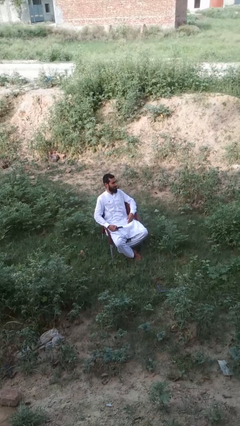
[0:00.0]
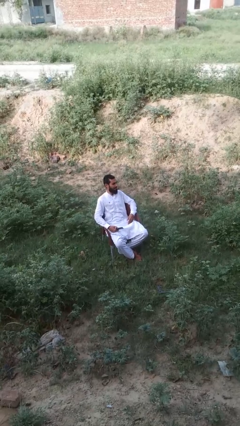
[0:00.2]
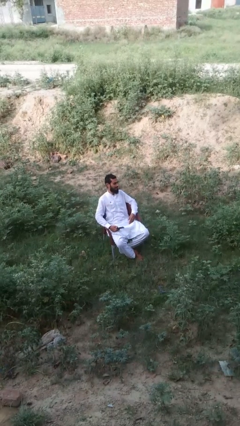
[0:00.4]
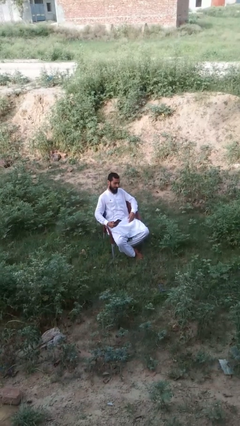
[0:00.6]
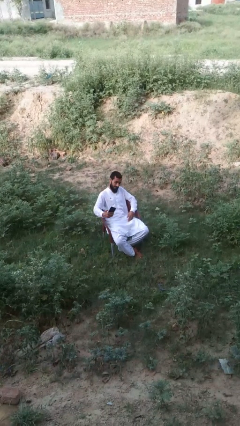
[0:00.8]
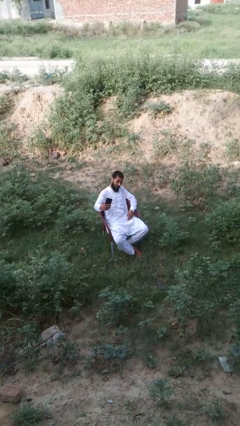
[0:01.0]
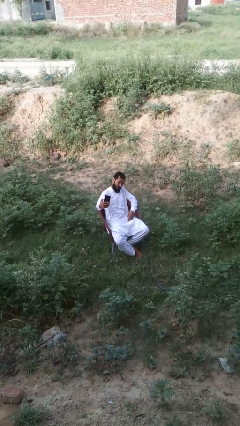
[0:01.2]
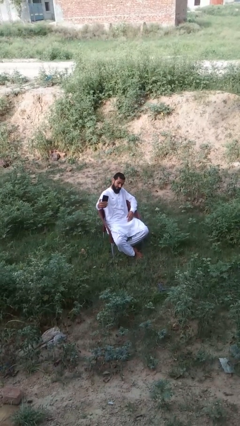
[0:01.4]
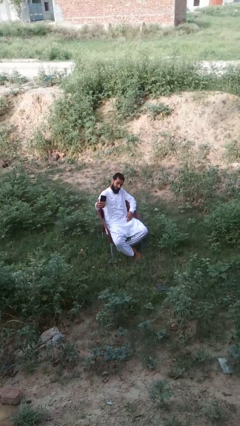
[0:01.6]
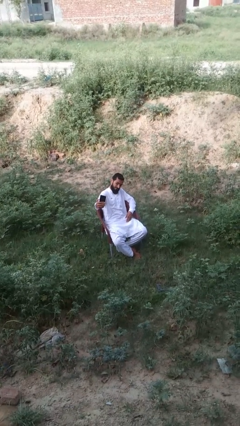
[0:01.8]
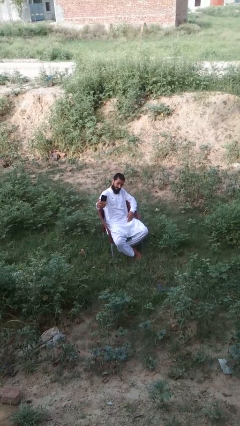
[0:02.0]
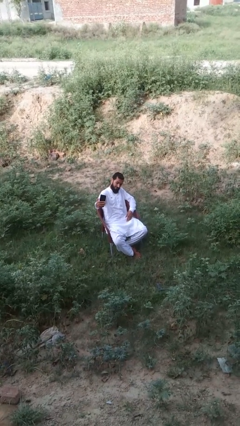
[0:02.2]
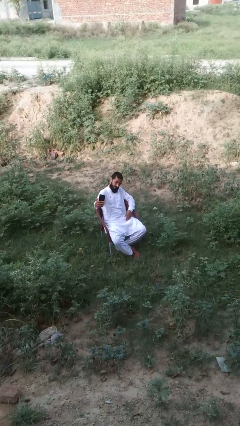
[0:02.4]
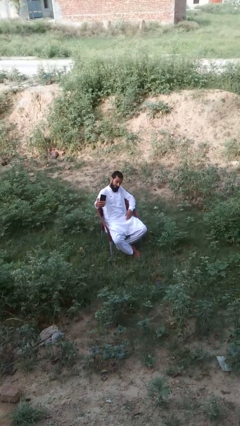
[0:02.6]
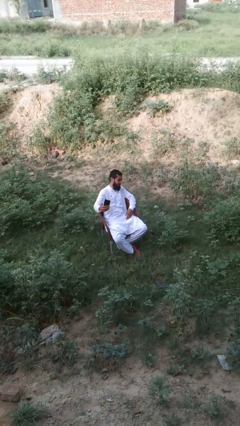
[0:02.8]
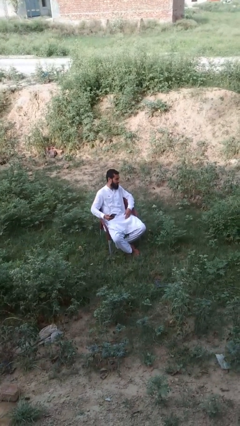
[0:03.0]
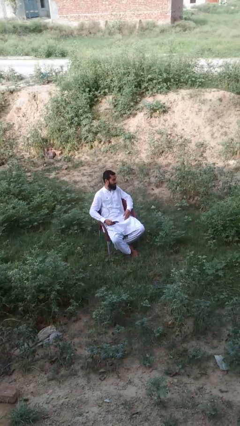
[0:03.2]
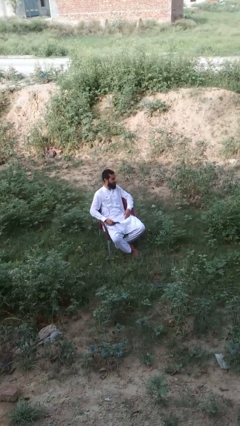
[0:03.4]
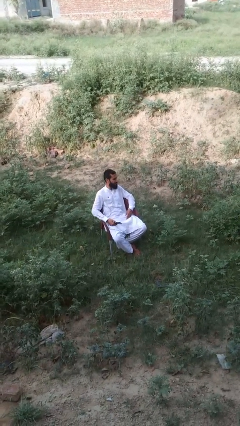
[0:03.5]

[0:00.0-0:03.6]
person takes selfie

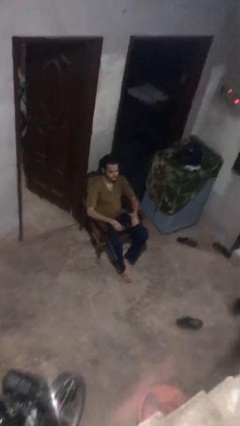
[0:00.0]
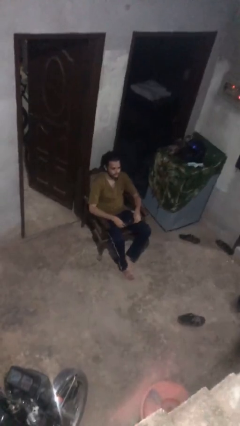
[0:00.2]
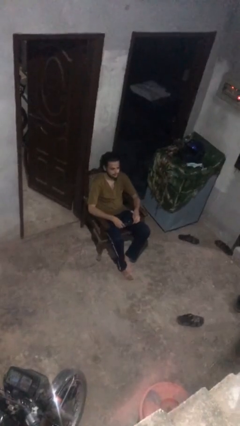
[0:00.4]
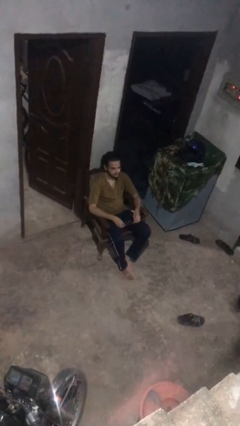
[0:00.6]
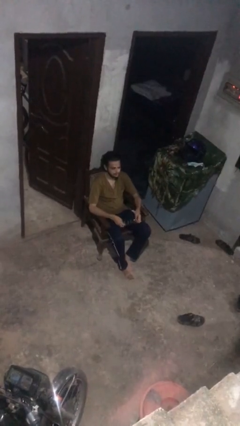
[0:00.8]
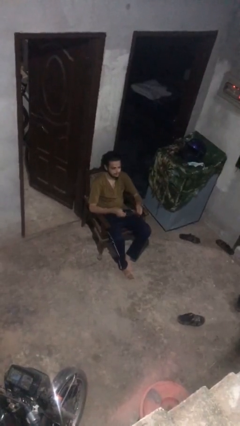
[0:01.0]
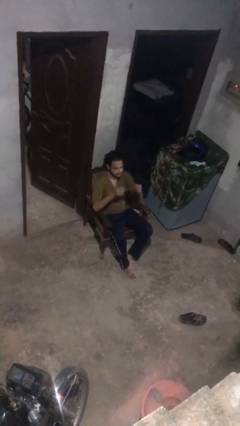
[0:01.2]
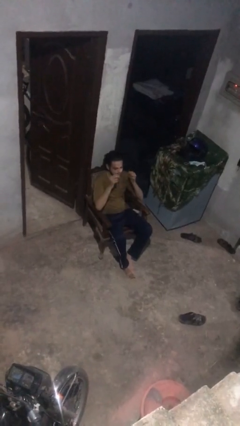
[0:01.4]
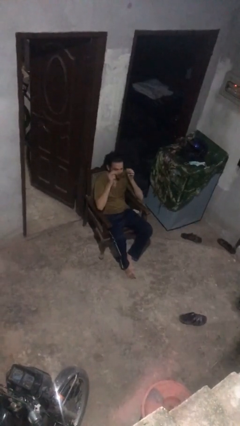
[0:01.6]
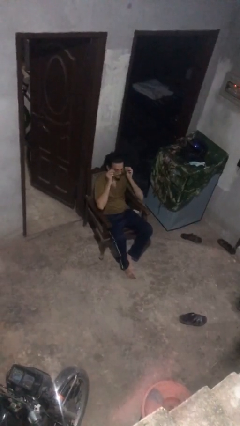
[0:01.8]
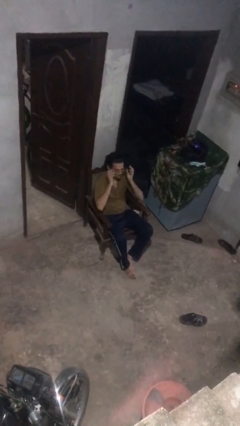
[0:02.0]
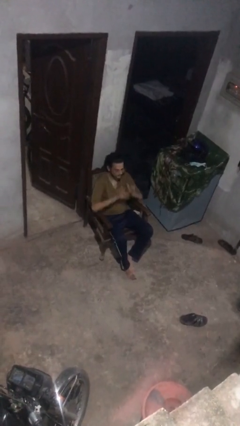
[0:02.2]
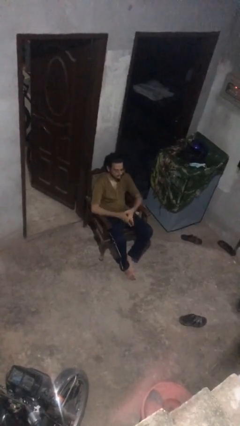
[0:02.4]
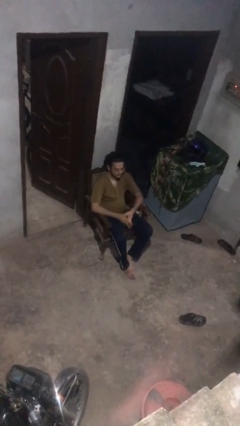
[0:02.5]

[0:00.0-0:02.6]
person puts on glasses

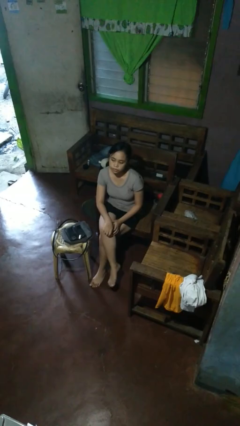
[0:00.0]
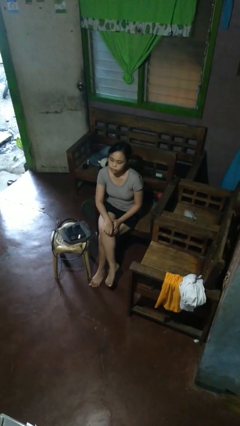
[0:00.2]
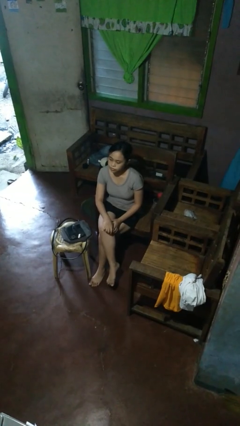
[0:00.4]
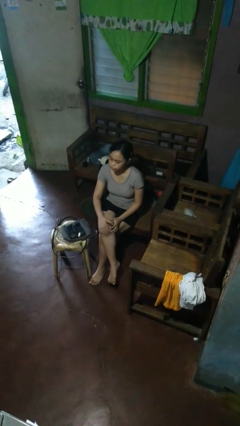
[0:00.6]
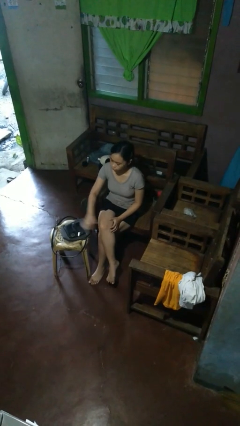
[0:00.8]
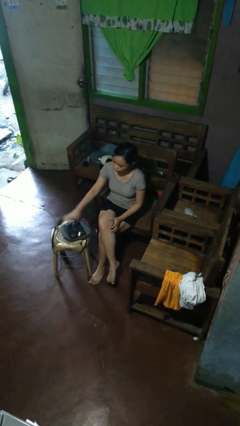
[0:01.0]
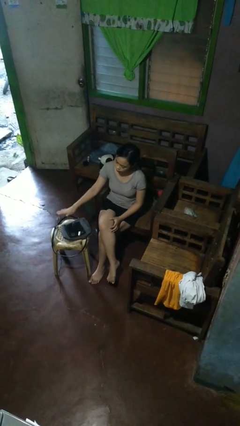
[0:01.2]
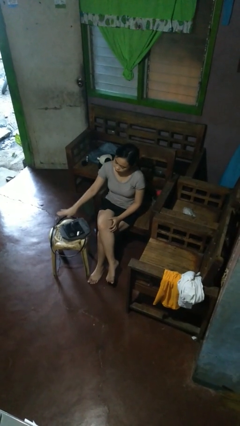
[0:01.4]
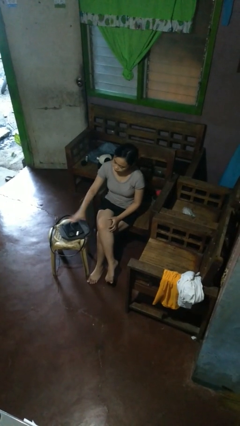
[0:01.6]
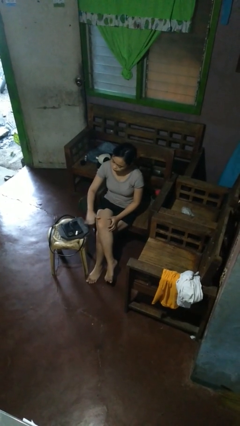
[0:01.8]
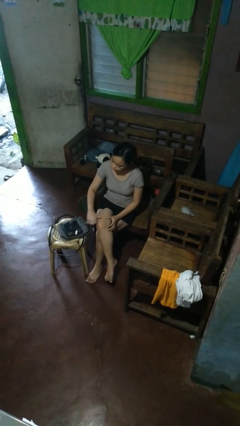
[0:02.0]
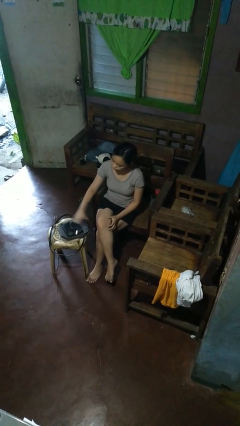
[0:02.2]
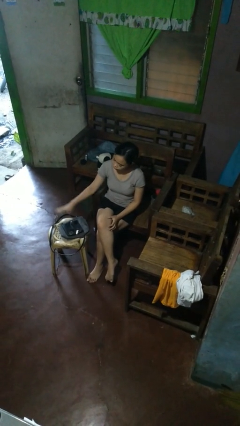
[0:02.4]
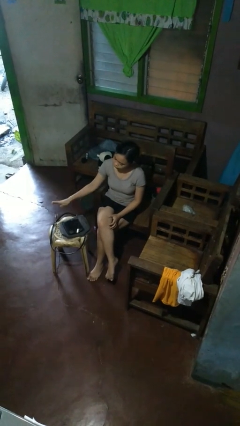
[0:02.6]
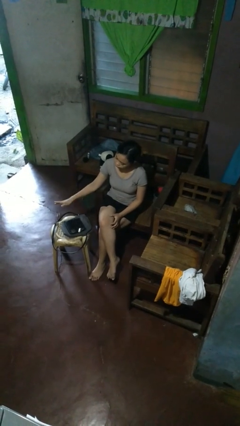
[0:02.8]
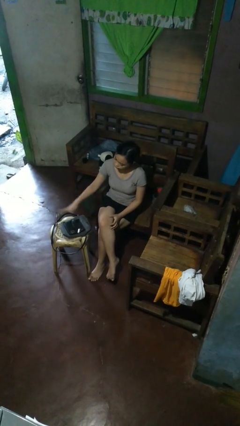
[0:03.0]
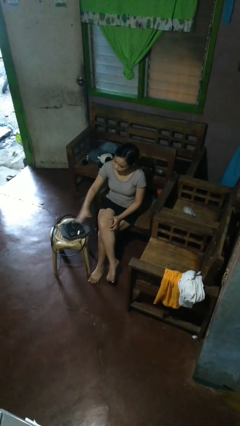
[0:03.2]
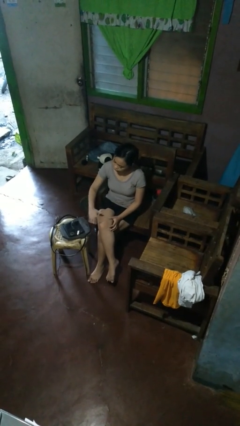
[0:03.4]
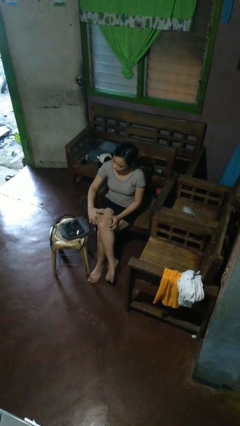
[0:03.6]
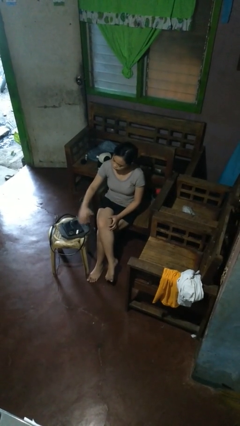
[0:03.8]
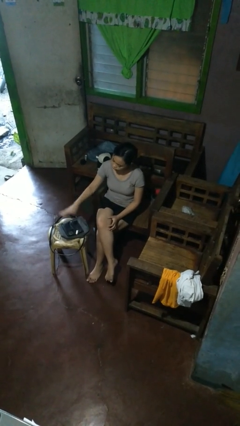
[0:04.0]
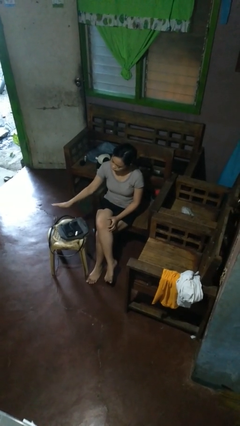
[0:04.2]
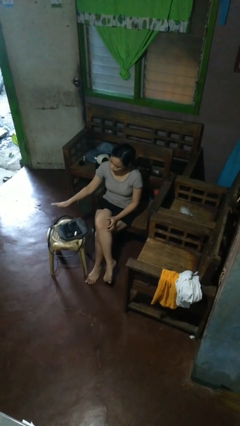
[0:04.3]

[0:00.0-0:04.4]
person waves hand over object

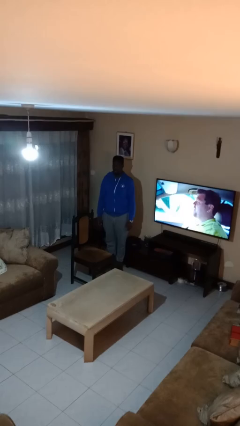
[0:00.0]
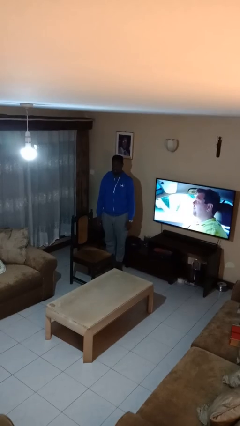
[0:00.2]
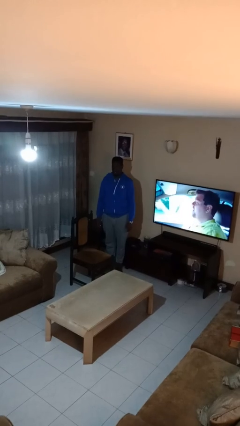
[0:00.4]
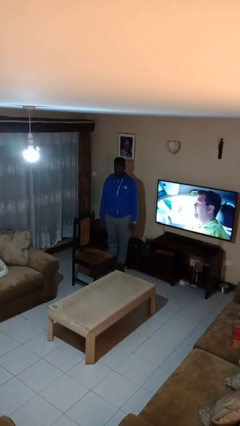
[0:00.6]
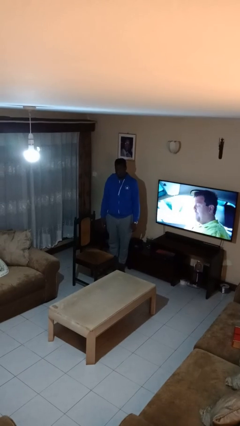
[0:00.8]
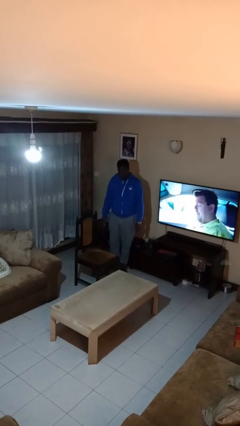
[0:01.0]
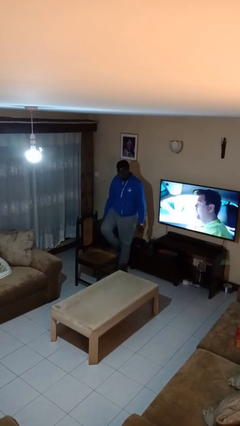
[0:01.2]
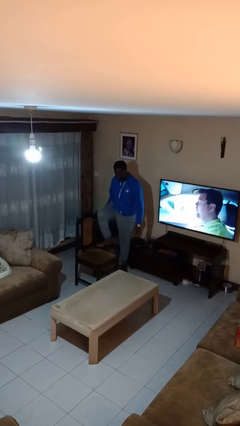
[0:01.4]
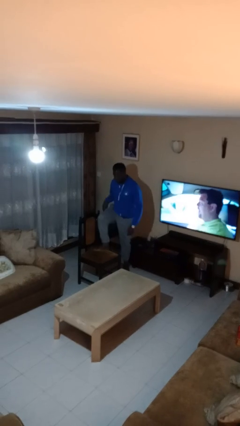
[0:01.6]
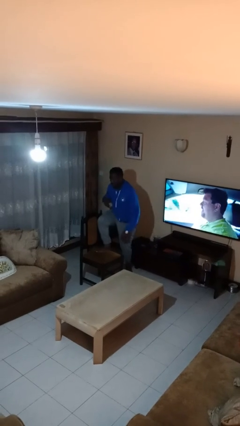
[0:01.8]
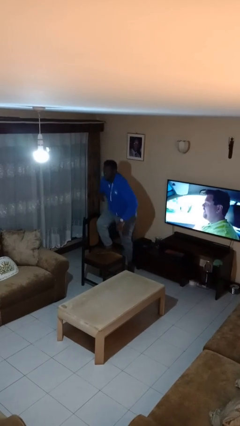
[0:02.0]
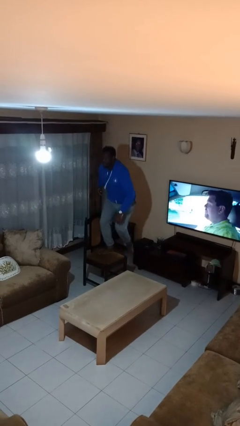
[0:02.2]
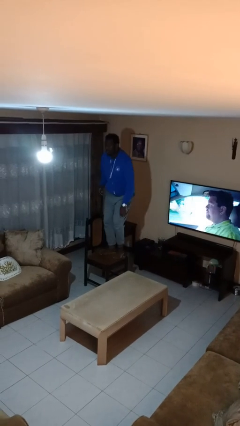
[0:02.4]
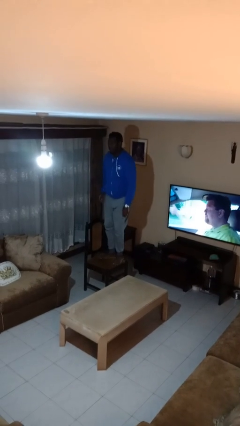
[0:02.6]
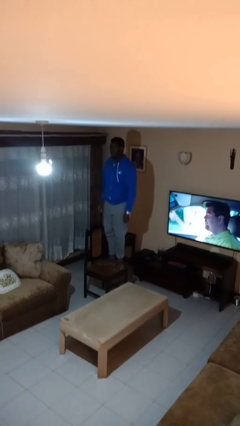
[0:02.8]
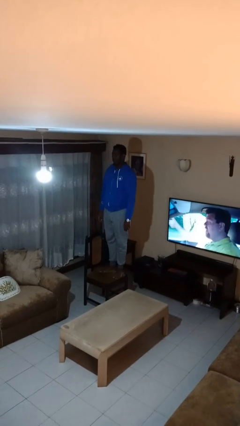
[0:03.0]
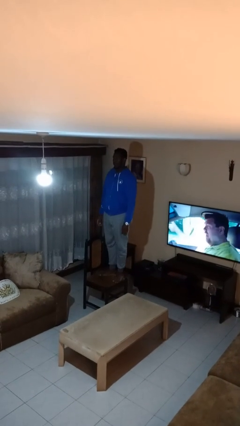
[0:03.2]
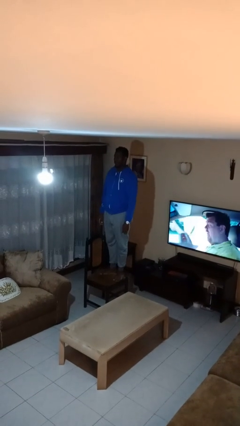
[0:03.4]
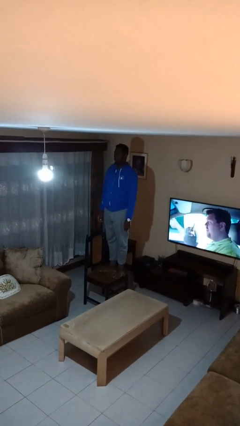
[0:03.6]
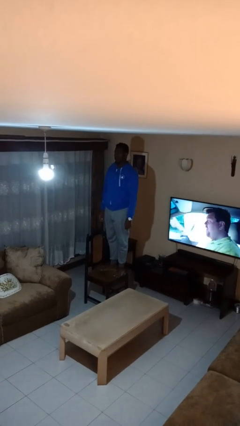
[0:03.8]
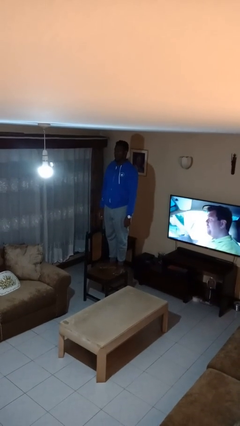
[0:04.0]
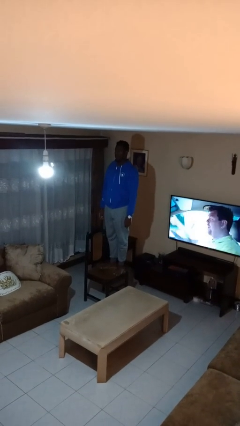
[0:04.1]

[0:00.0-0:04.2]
person climbs on chair

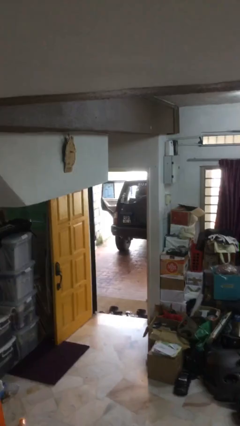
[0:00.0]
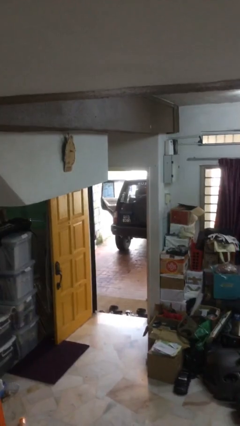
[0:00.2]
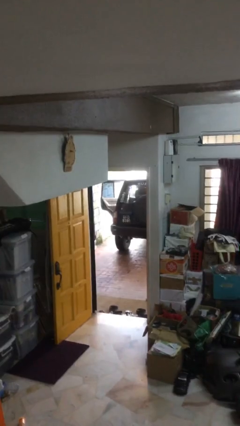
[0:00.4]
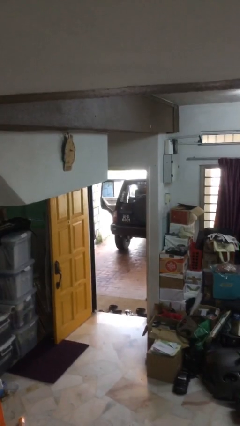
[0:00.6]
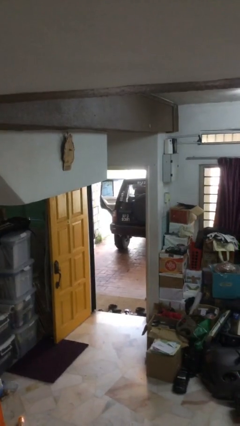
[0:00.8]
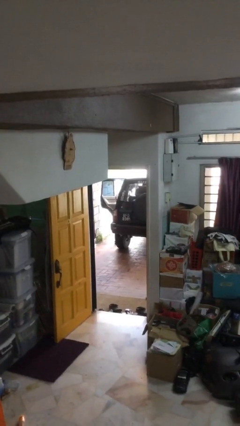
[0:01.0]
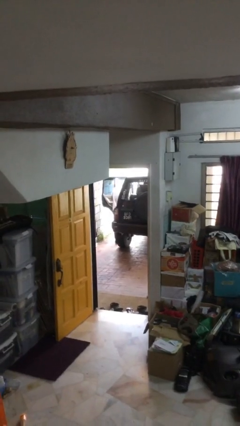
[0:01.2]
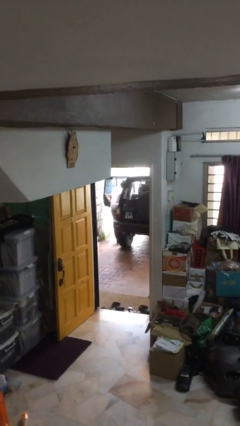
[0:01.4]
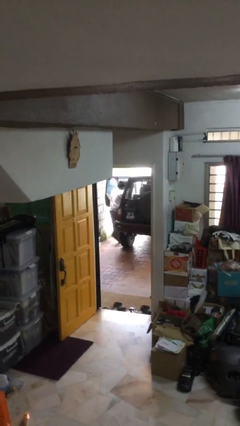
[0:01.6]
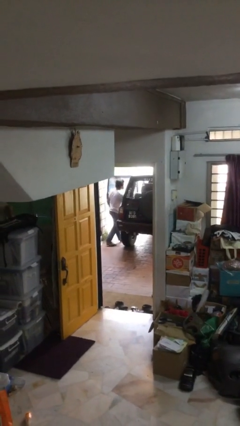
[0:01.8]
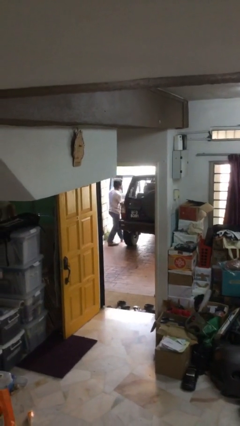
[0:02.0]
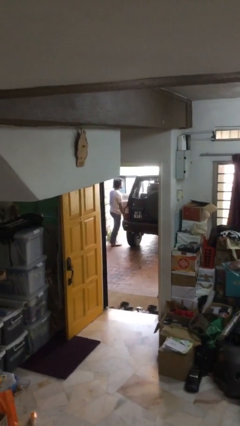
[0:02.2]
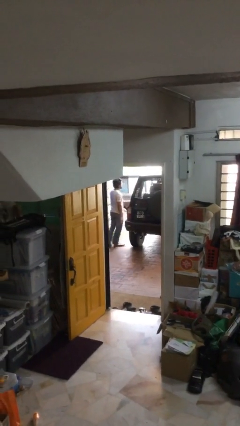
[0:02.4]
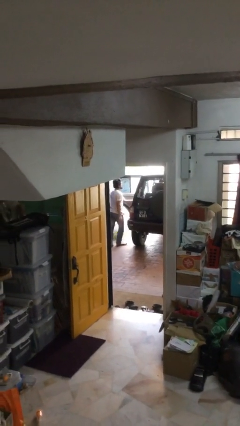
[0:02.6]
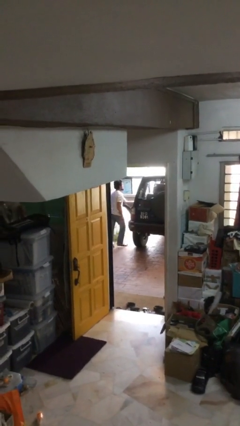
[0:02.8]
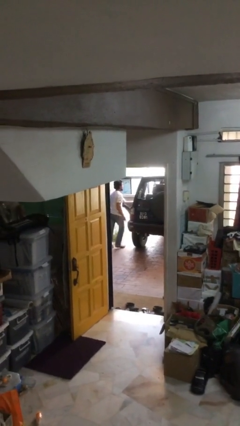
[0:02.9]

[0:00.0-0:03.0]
person exits car

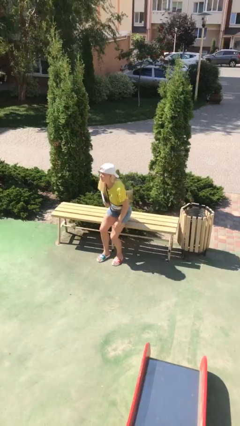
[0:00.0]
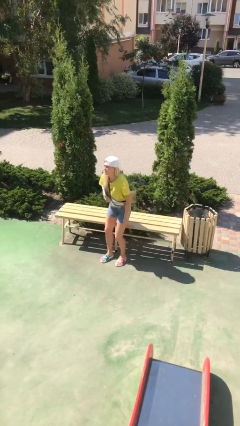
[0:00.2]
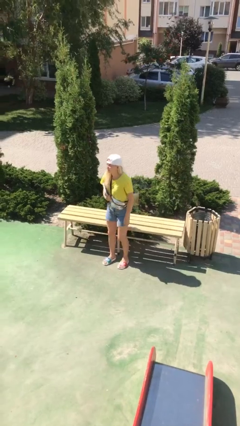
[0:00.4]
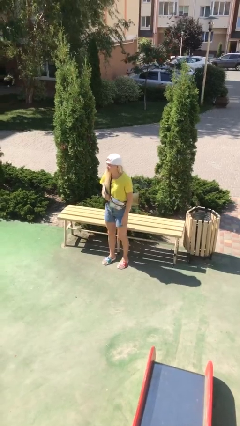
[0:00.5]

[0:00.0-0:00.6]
person stands up
